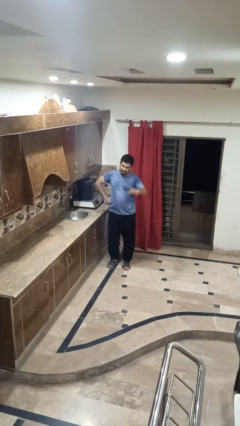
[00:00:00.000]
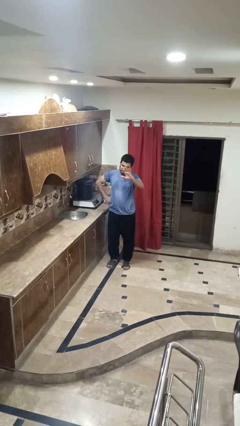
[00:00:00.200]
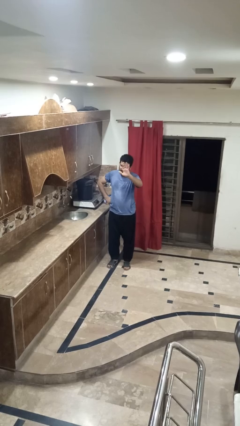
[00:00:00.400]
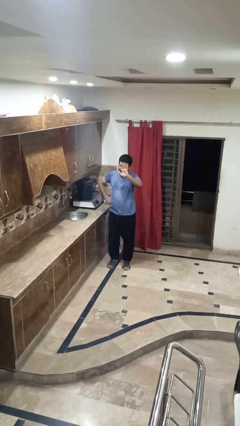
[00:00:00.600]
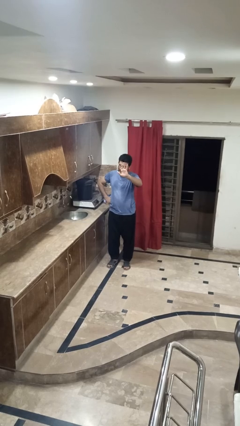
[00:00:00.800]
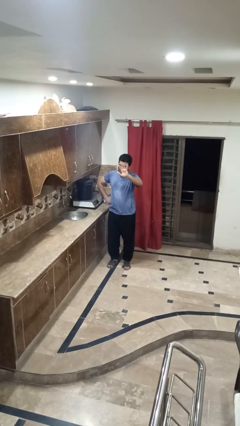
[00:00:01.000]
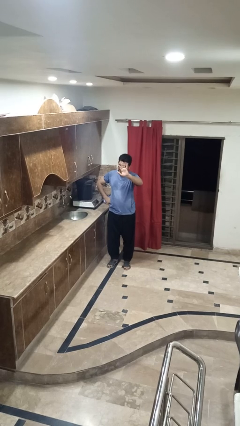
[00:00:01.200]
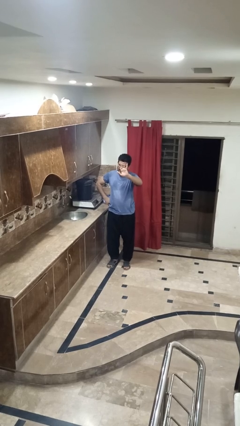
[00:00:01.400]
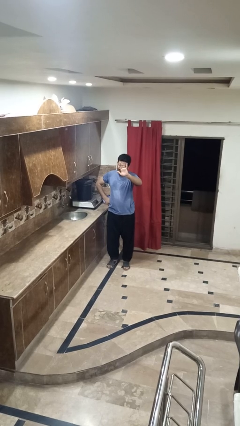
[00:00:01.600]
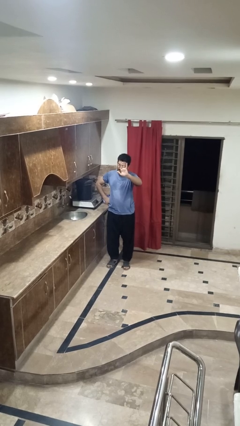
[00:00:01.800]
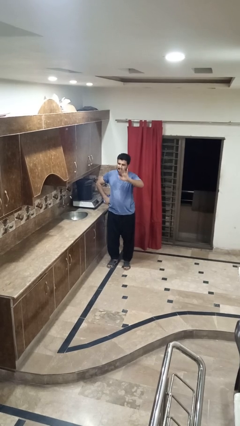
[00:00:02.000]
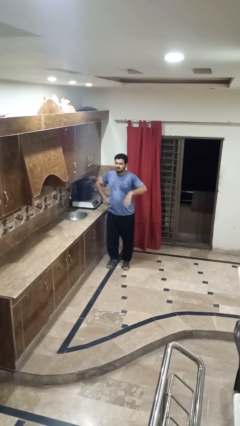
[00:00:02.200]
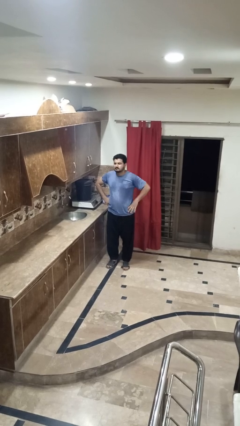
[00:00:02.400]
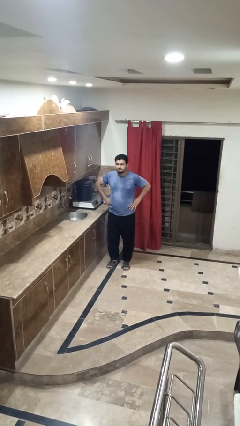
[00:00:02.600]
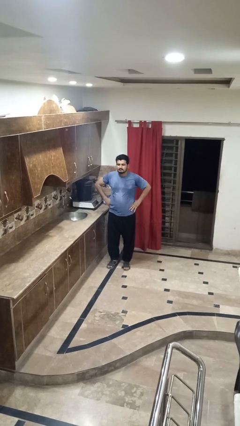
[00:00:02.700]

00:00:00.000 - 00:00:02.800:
person waves at person

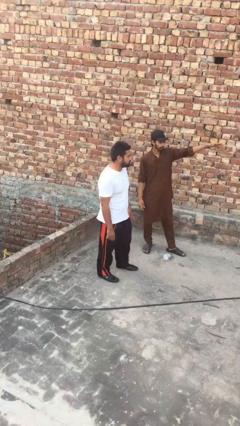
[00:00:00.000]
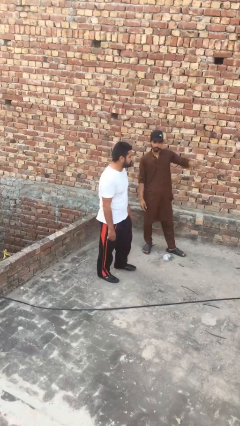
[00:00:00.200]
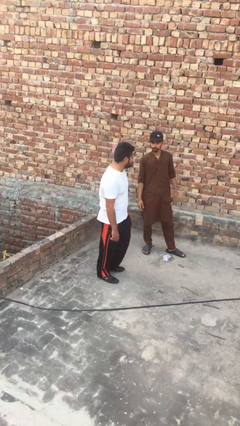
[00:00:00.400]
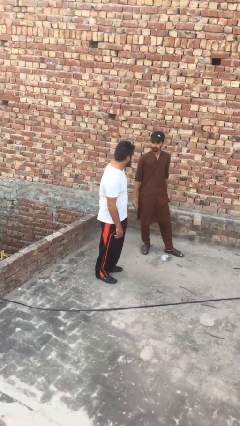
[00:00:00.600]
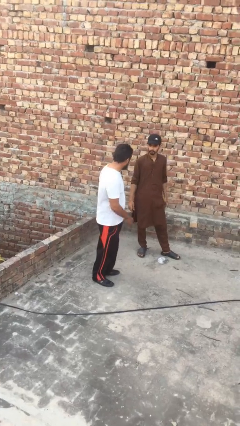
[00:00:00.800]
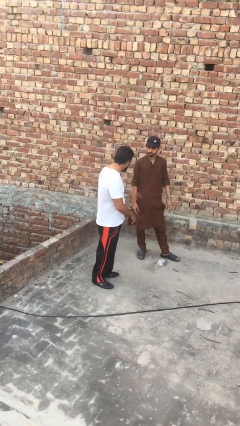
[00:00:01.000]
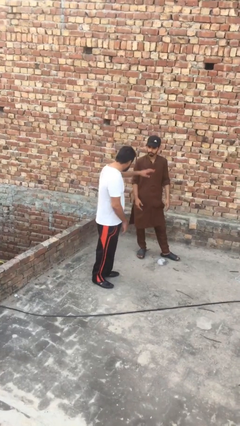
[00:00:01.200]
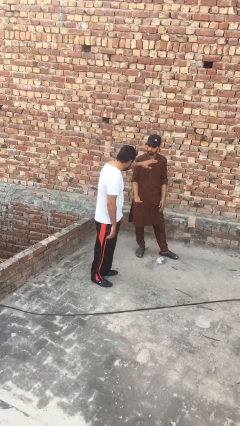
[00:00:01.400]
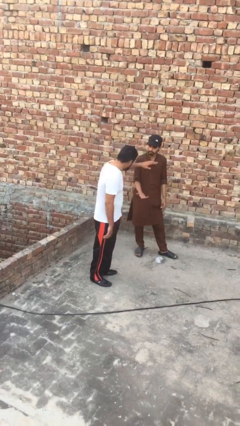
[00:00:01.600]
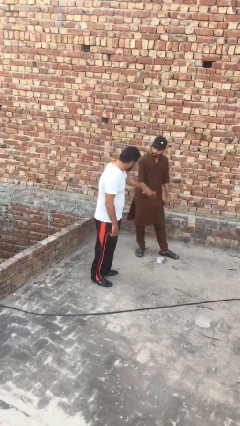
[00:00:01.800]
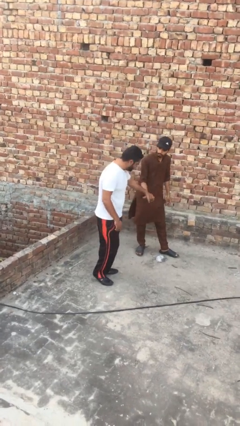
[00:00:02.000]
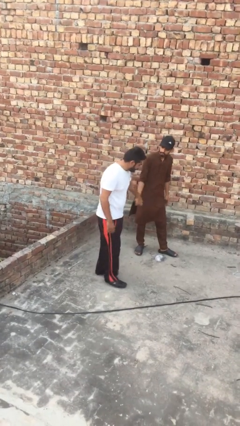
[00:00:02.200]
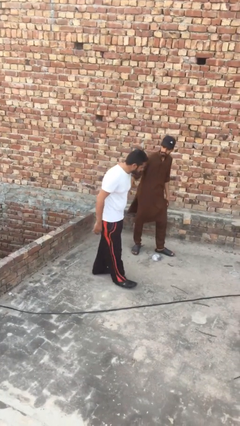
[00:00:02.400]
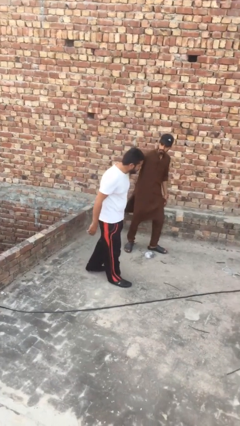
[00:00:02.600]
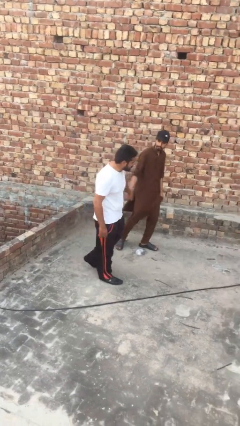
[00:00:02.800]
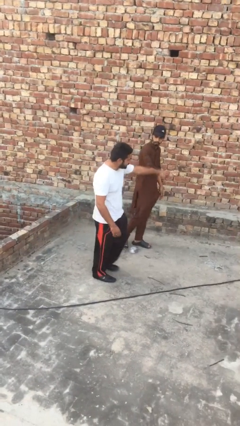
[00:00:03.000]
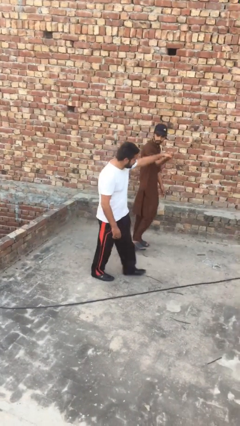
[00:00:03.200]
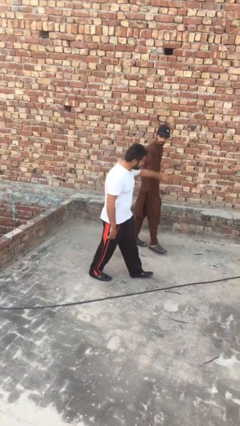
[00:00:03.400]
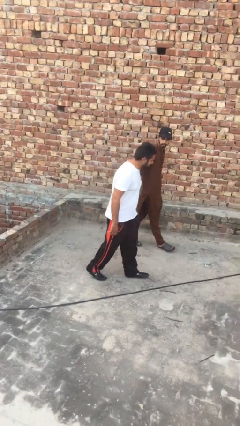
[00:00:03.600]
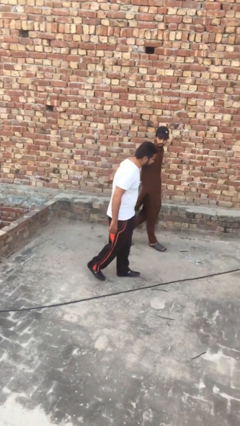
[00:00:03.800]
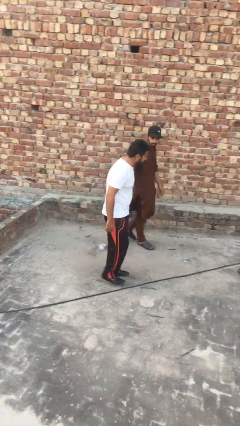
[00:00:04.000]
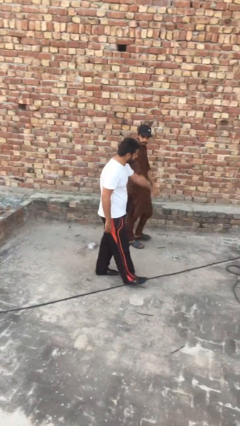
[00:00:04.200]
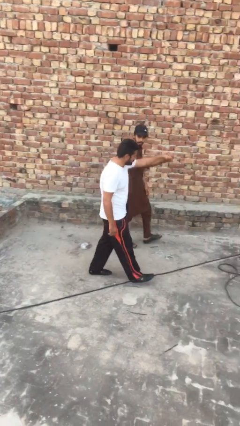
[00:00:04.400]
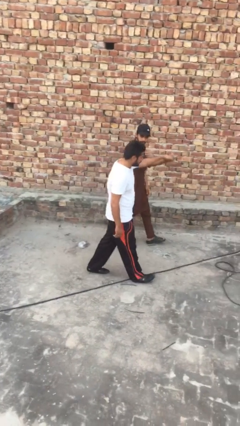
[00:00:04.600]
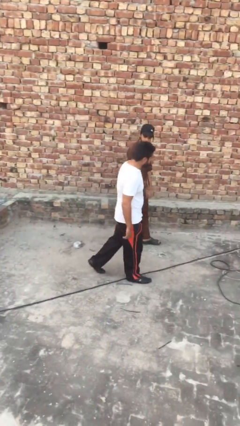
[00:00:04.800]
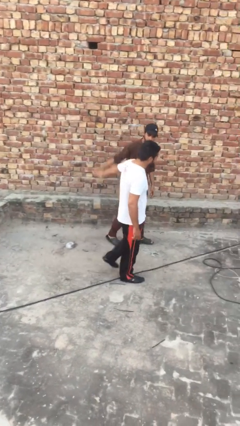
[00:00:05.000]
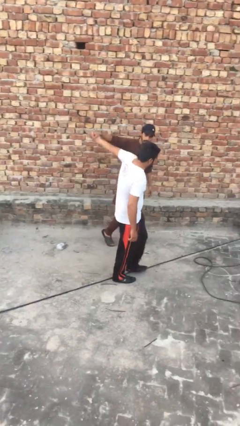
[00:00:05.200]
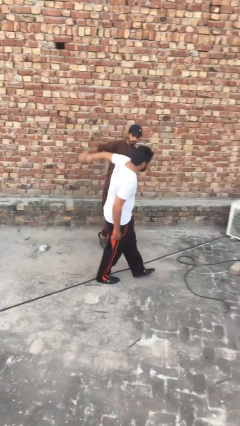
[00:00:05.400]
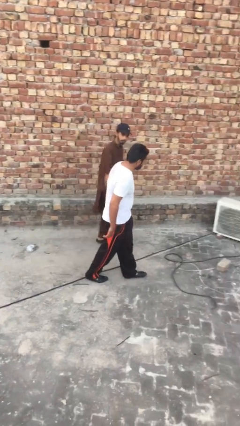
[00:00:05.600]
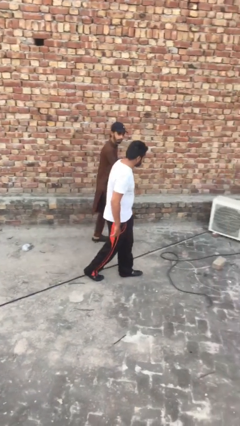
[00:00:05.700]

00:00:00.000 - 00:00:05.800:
person holds hand

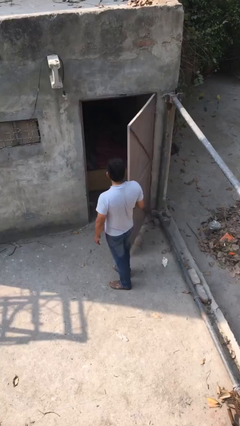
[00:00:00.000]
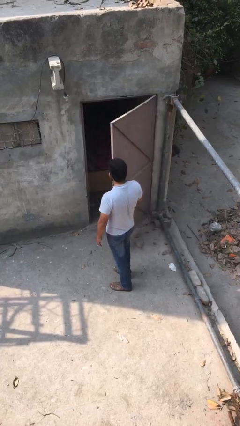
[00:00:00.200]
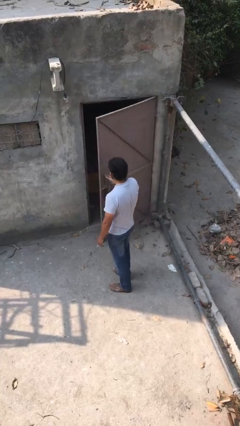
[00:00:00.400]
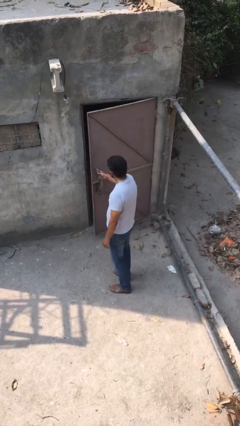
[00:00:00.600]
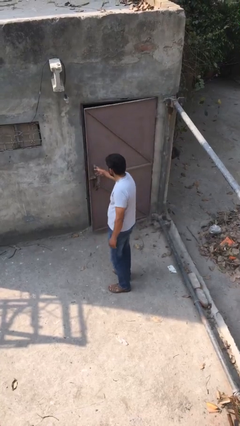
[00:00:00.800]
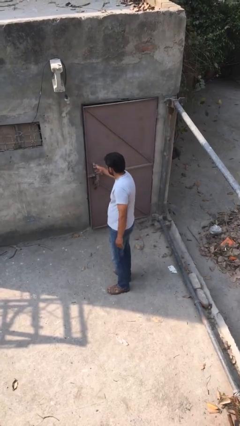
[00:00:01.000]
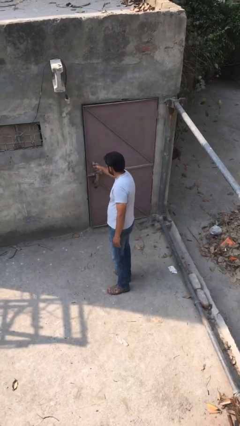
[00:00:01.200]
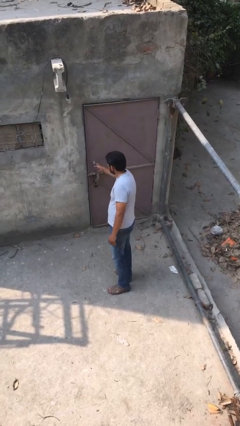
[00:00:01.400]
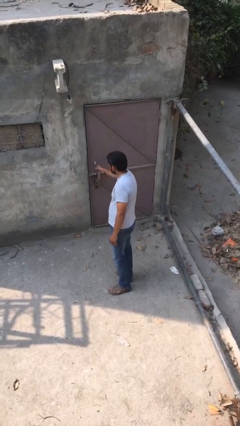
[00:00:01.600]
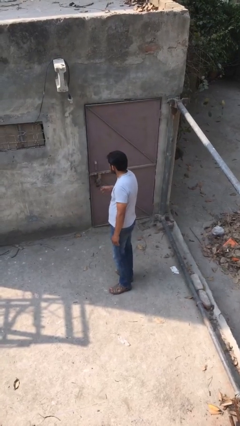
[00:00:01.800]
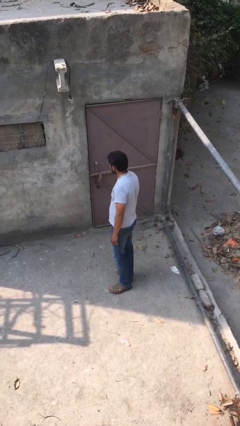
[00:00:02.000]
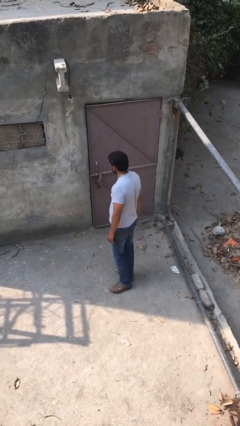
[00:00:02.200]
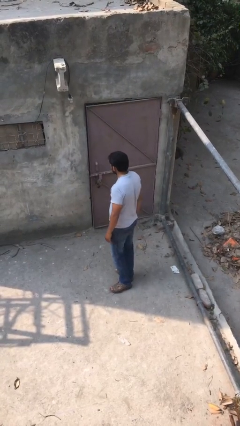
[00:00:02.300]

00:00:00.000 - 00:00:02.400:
person closes facility door

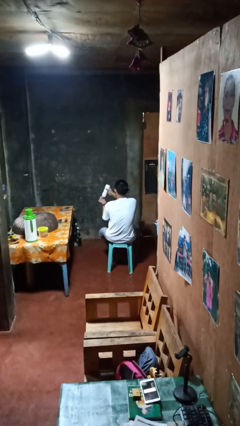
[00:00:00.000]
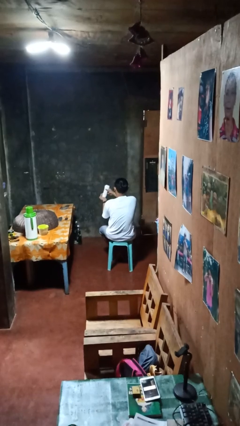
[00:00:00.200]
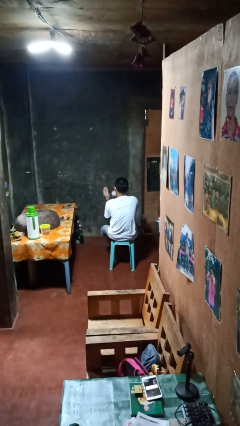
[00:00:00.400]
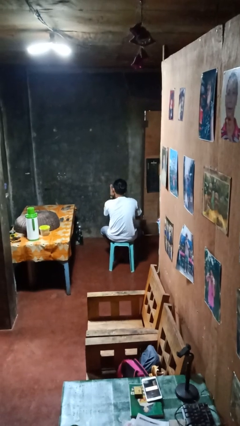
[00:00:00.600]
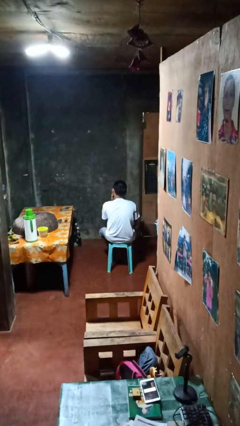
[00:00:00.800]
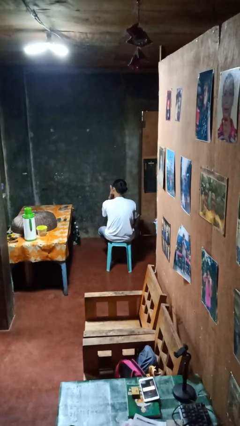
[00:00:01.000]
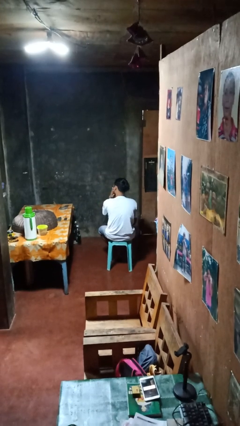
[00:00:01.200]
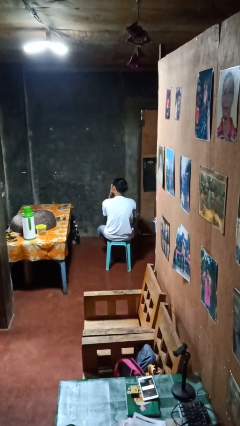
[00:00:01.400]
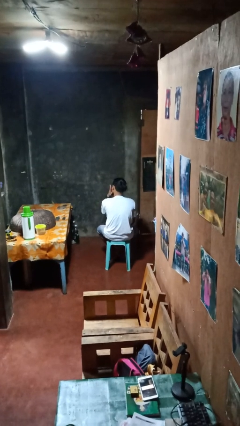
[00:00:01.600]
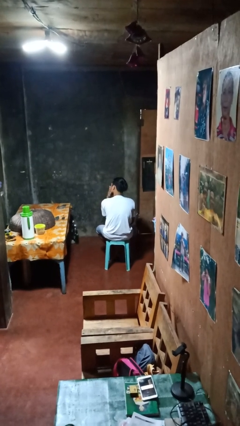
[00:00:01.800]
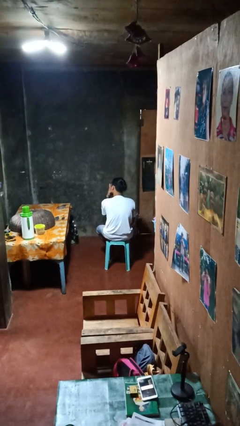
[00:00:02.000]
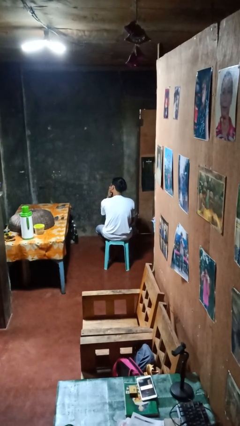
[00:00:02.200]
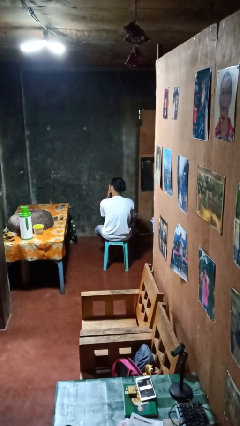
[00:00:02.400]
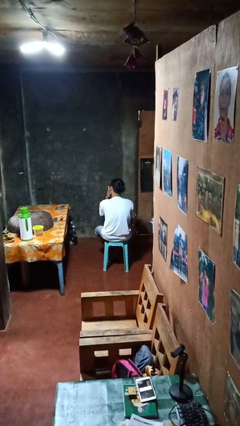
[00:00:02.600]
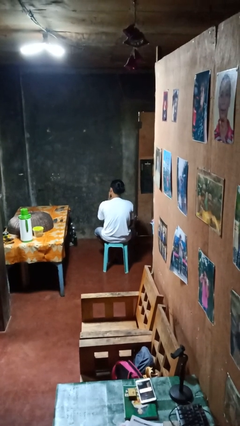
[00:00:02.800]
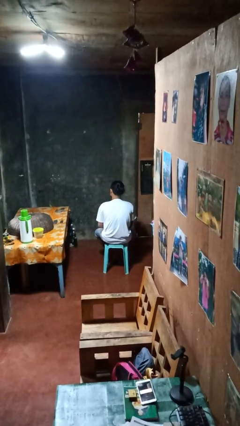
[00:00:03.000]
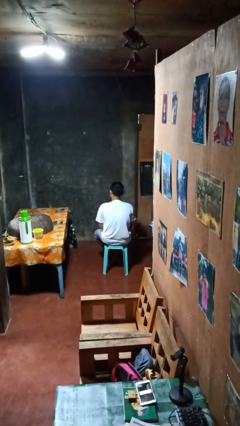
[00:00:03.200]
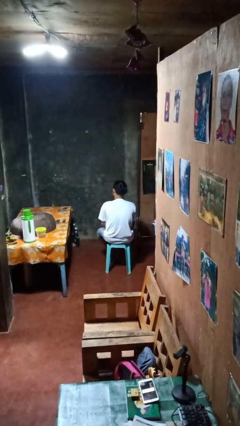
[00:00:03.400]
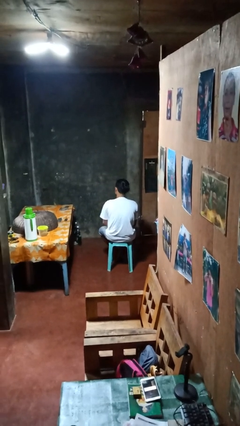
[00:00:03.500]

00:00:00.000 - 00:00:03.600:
person applies shaving cream

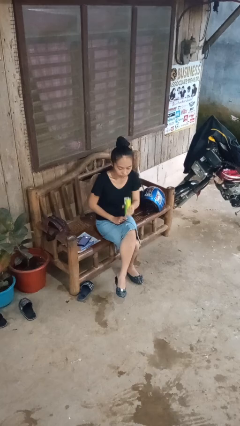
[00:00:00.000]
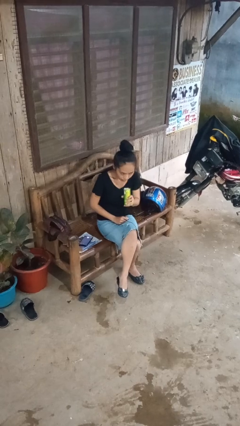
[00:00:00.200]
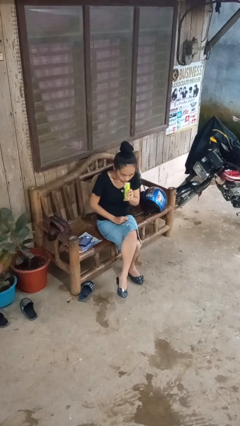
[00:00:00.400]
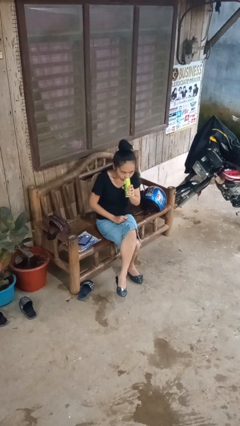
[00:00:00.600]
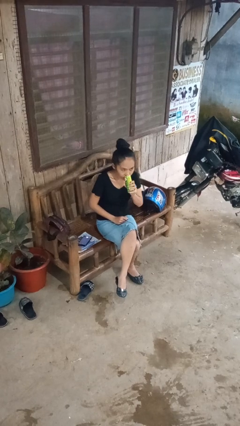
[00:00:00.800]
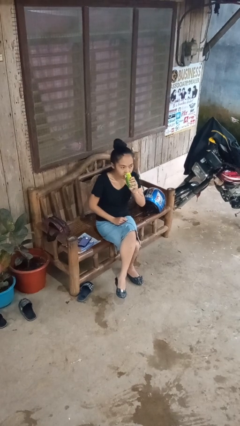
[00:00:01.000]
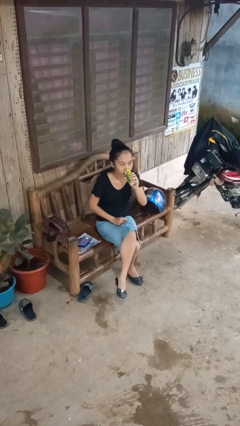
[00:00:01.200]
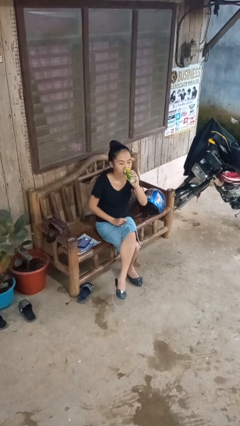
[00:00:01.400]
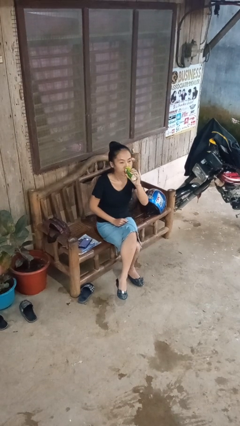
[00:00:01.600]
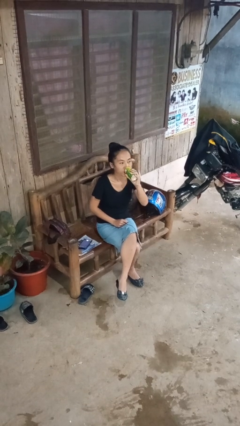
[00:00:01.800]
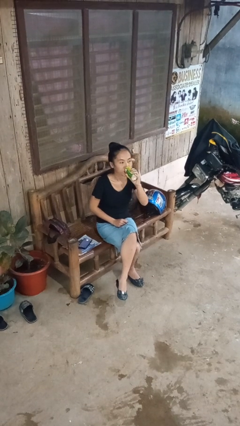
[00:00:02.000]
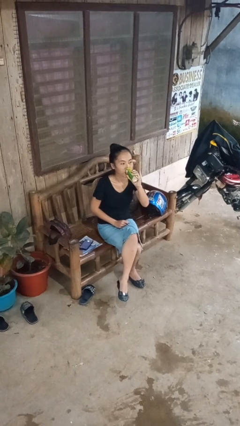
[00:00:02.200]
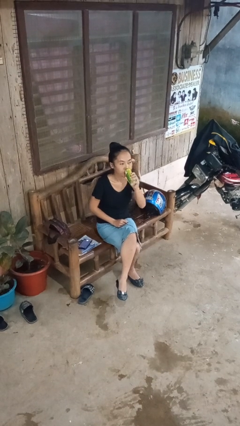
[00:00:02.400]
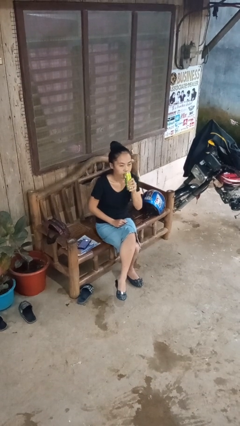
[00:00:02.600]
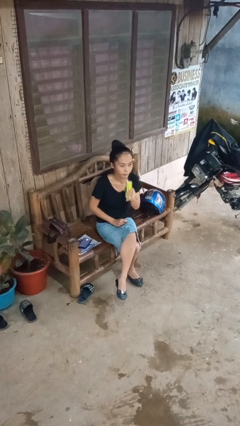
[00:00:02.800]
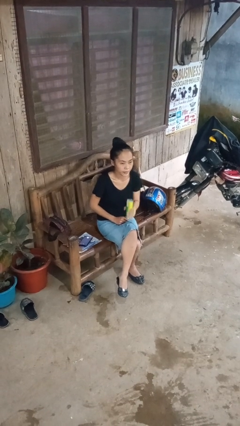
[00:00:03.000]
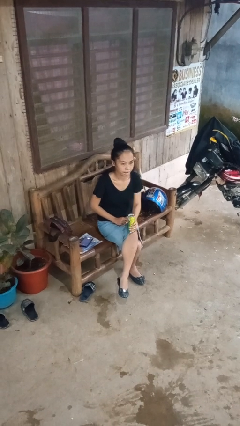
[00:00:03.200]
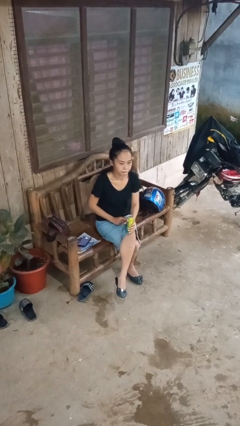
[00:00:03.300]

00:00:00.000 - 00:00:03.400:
person drinks from beverage can
